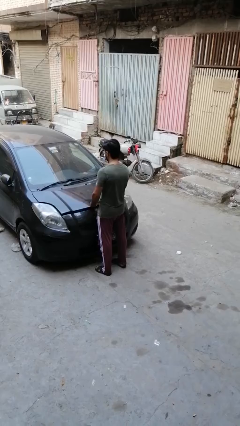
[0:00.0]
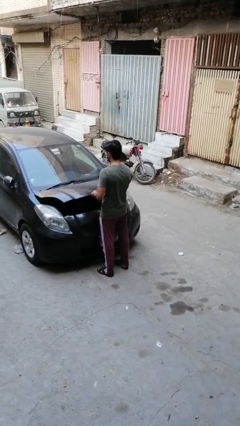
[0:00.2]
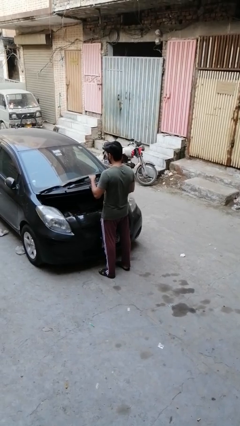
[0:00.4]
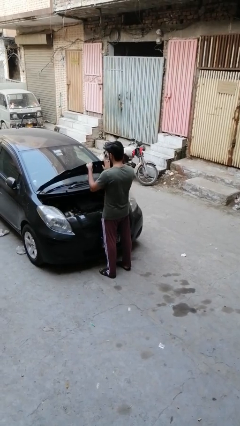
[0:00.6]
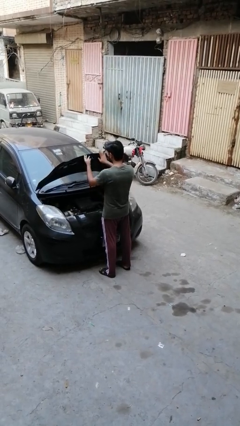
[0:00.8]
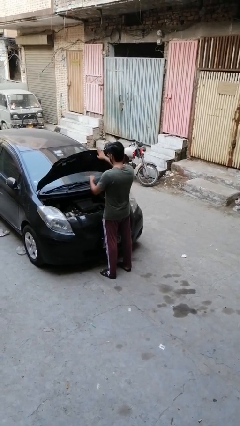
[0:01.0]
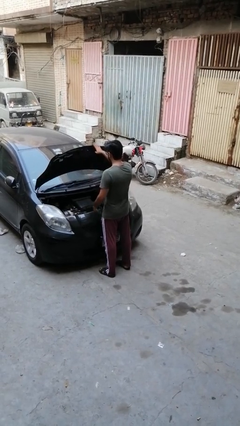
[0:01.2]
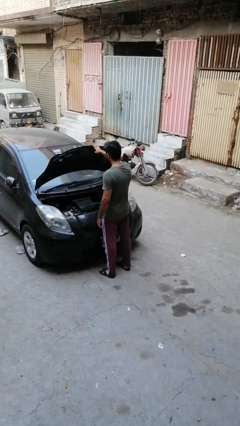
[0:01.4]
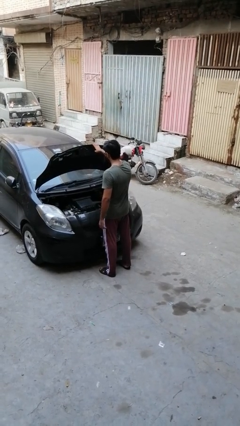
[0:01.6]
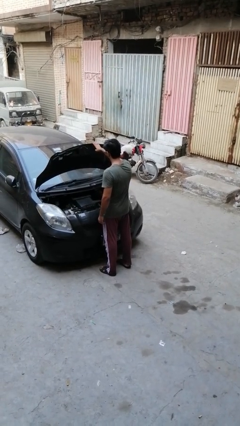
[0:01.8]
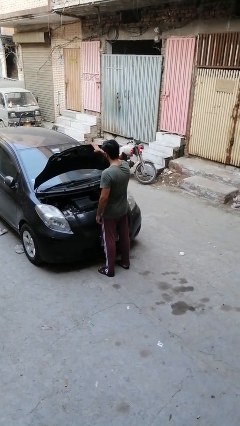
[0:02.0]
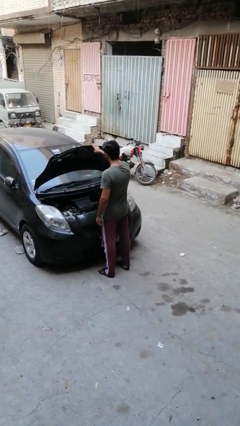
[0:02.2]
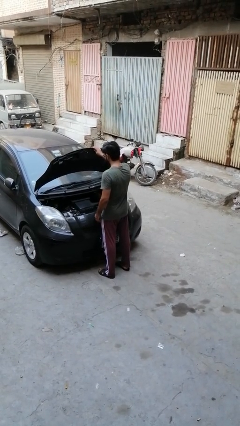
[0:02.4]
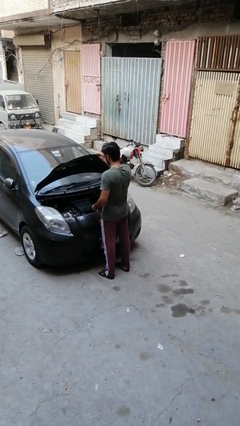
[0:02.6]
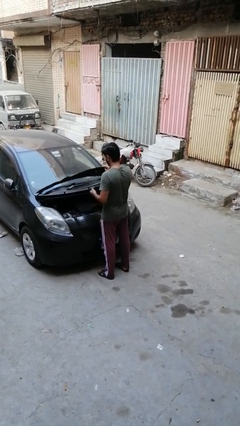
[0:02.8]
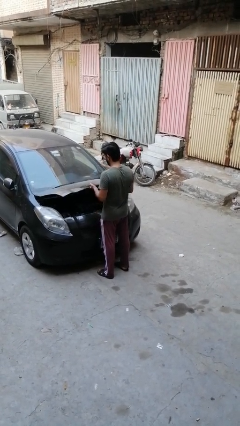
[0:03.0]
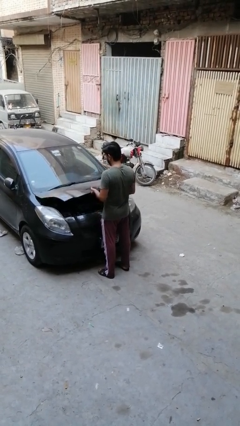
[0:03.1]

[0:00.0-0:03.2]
person opens car hood

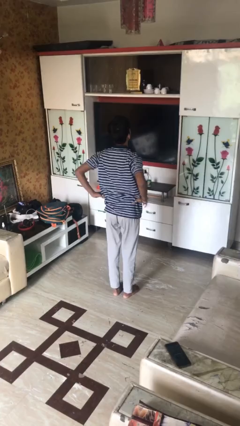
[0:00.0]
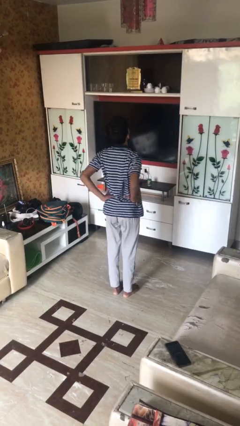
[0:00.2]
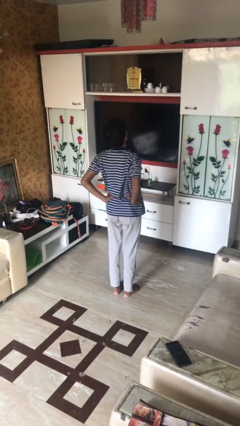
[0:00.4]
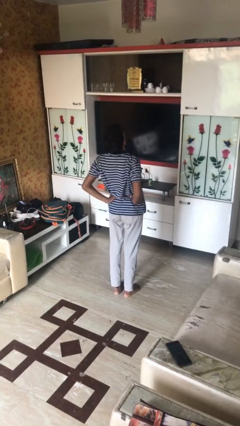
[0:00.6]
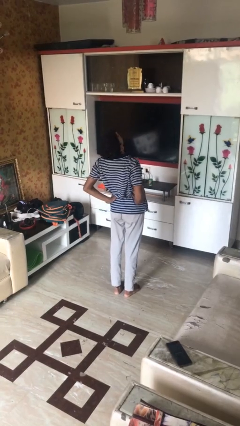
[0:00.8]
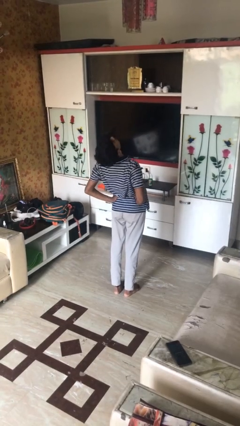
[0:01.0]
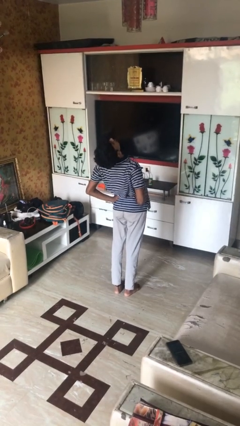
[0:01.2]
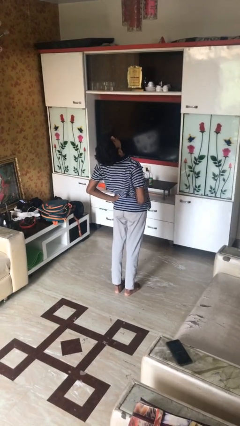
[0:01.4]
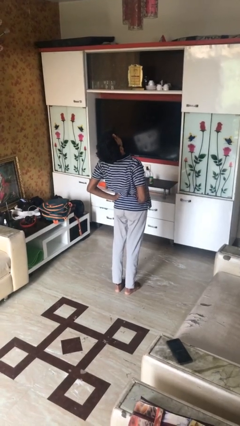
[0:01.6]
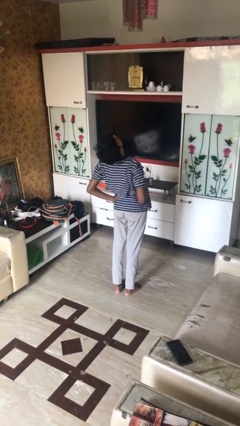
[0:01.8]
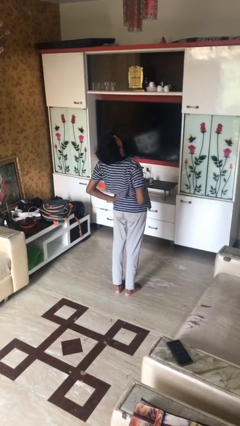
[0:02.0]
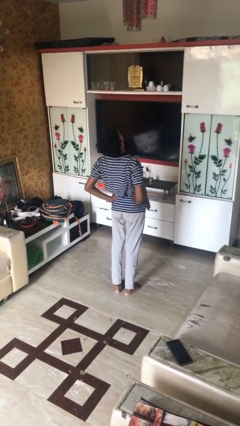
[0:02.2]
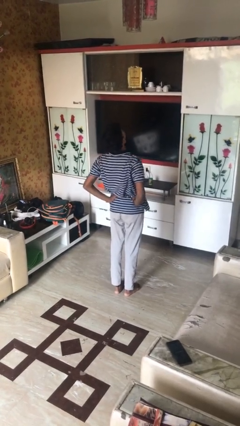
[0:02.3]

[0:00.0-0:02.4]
person stretches back

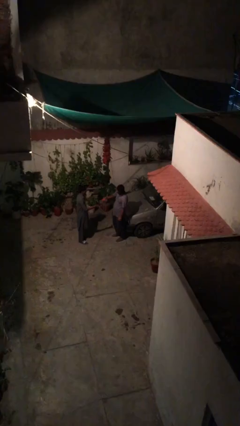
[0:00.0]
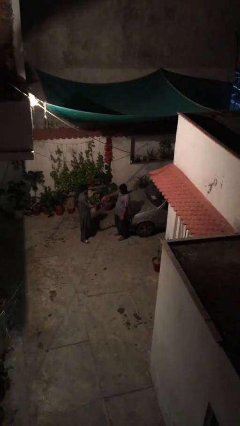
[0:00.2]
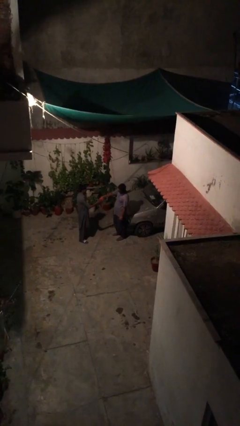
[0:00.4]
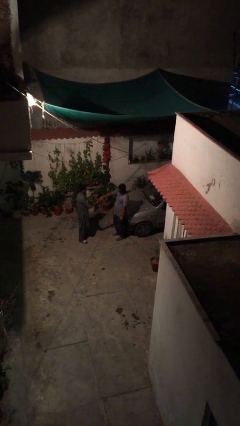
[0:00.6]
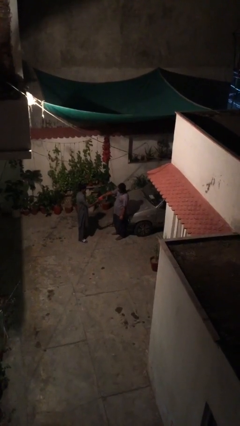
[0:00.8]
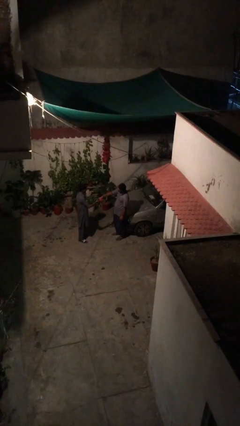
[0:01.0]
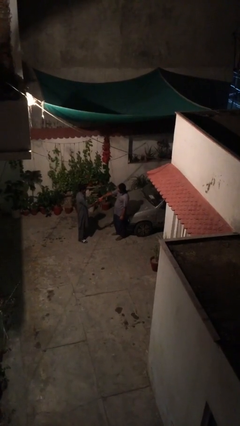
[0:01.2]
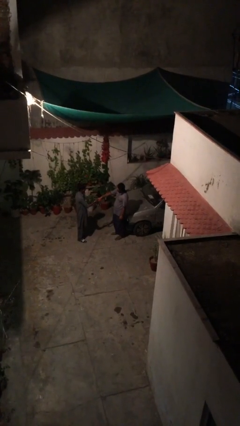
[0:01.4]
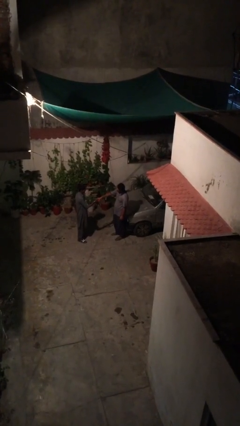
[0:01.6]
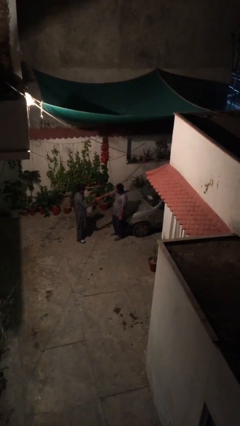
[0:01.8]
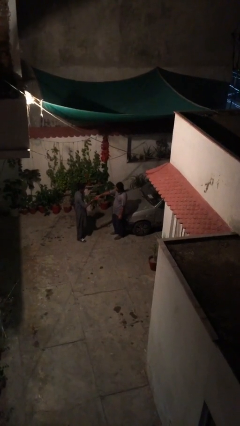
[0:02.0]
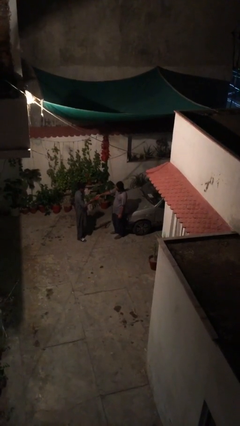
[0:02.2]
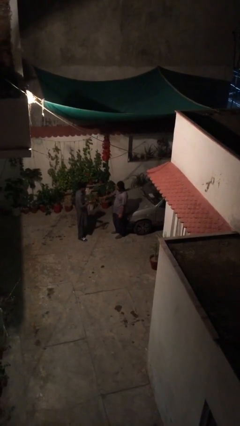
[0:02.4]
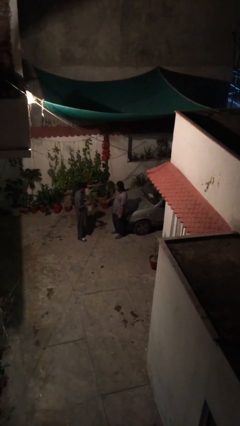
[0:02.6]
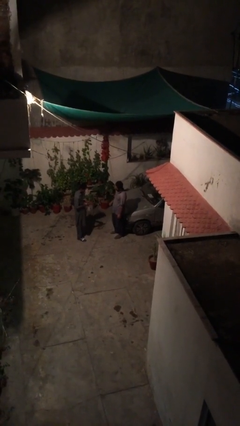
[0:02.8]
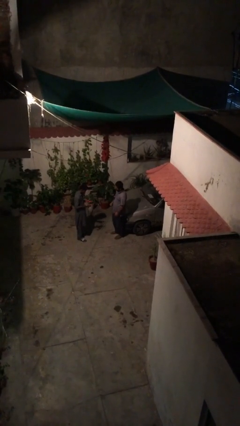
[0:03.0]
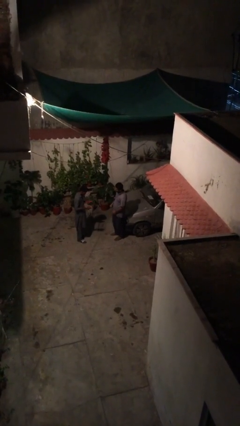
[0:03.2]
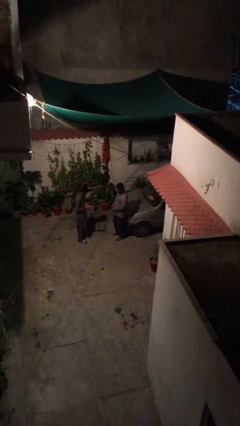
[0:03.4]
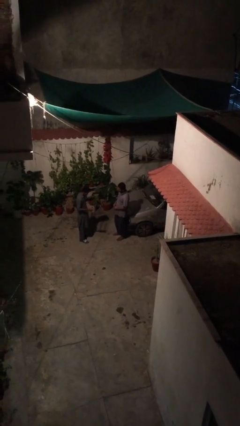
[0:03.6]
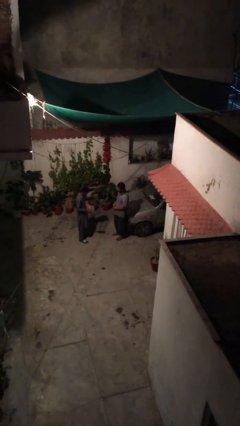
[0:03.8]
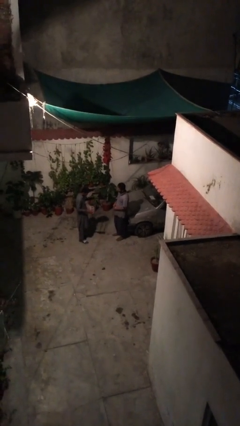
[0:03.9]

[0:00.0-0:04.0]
person transfers object to person

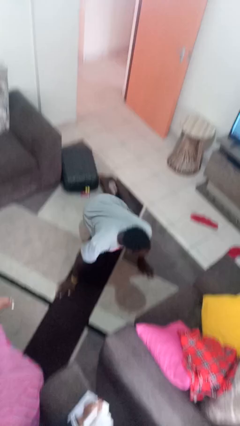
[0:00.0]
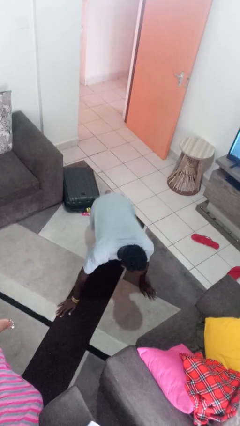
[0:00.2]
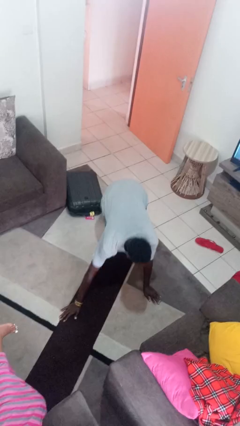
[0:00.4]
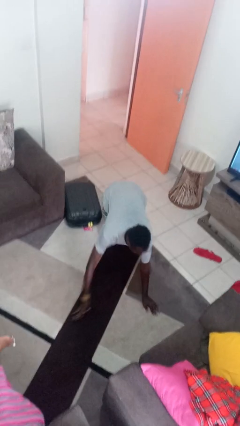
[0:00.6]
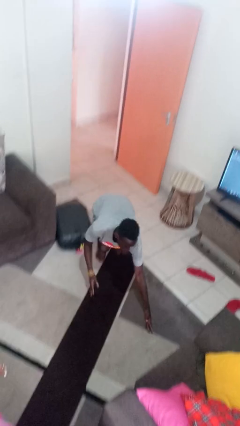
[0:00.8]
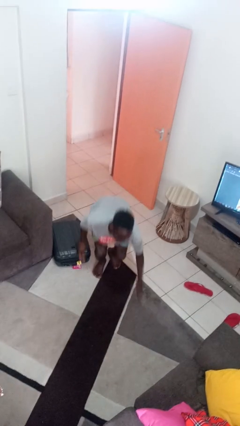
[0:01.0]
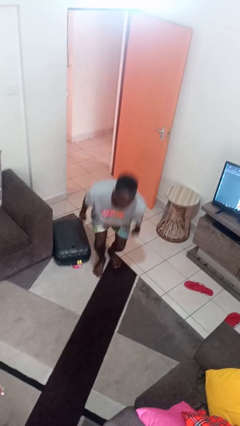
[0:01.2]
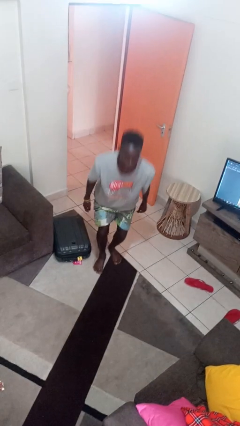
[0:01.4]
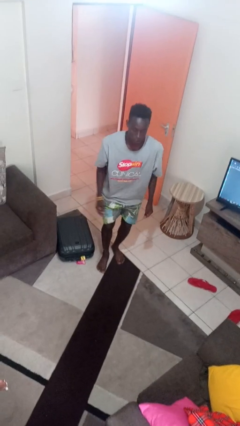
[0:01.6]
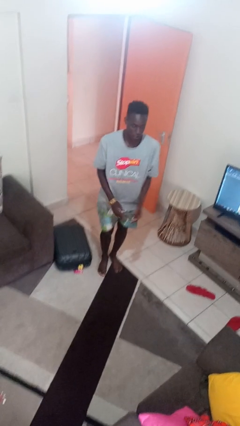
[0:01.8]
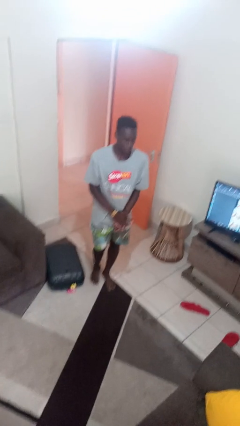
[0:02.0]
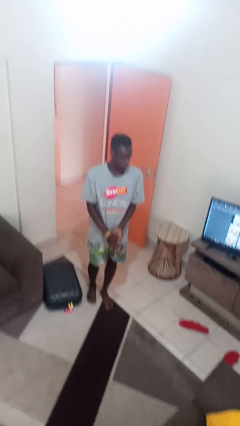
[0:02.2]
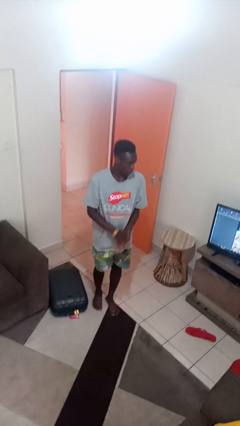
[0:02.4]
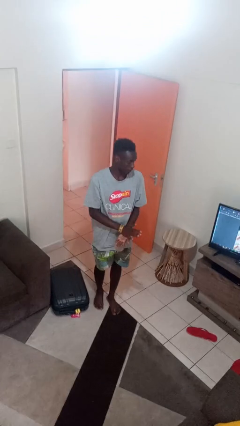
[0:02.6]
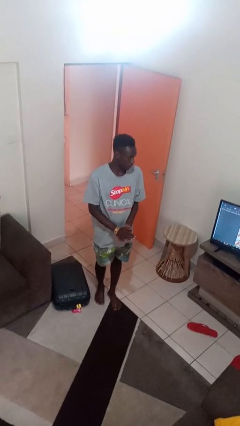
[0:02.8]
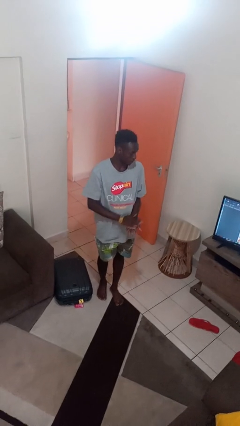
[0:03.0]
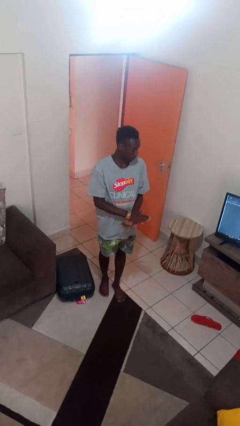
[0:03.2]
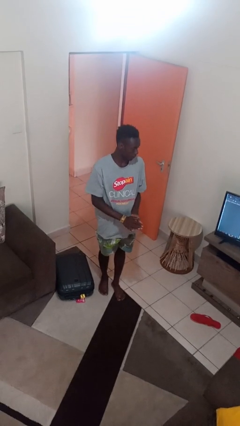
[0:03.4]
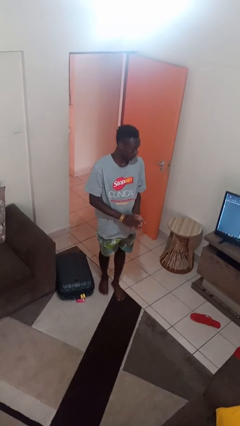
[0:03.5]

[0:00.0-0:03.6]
person stands up from floor

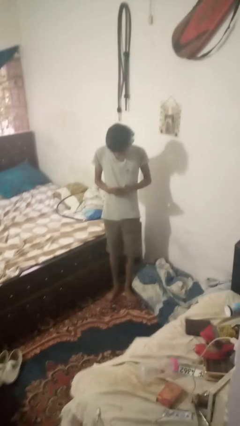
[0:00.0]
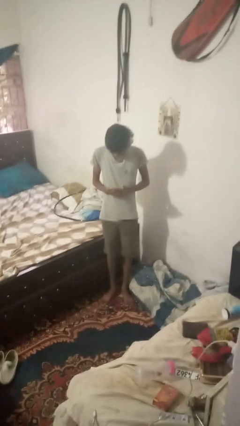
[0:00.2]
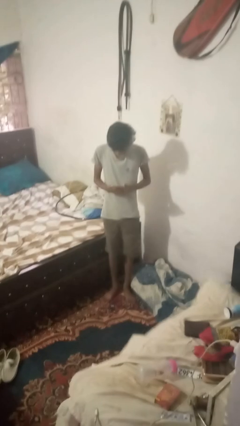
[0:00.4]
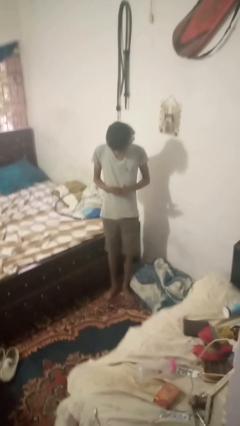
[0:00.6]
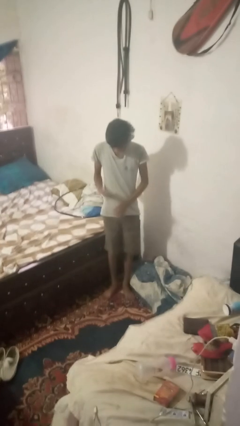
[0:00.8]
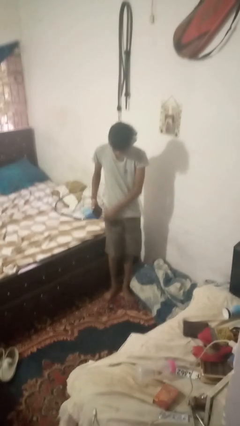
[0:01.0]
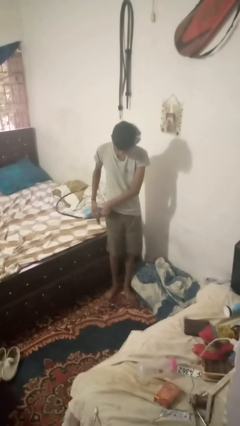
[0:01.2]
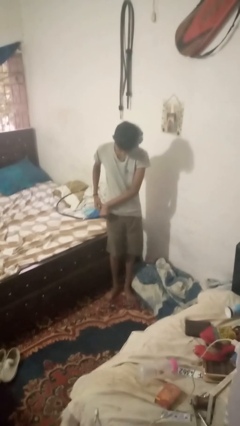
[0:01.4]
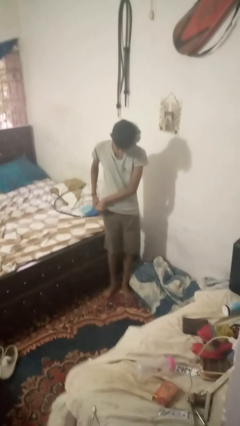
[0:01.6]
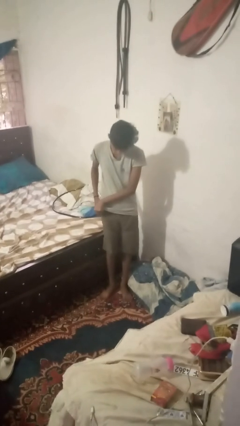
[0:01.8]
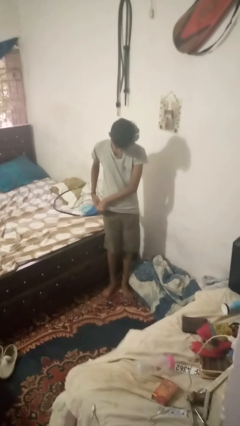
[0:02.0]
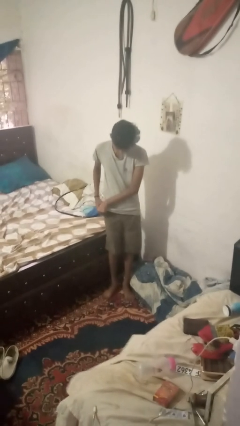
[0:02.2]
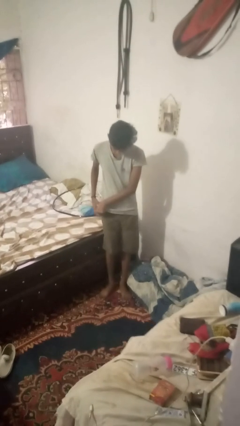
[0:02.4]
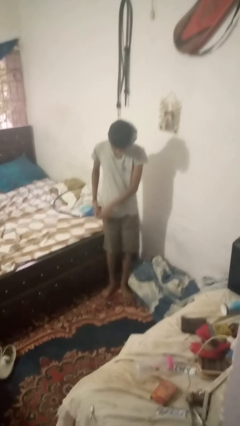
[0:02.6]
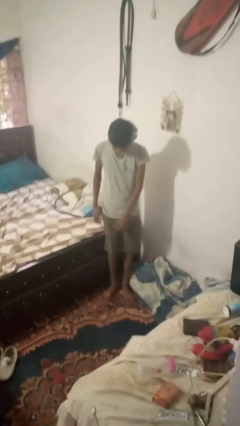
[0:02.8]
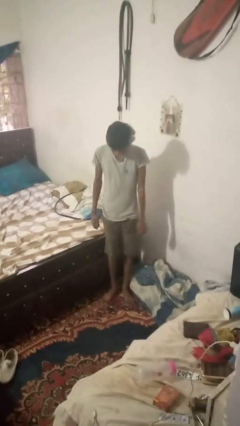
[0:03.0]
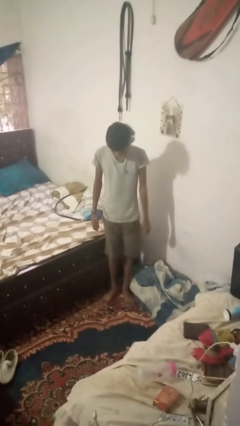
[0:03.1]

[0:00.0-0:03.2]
person puts phone into pocket

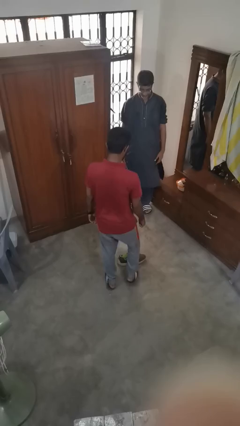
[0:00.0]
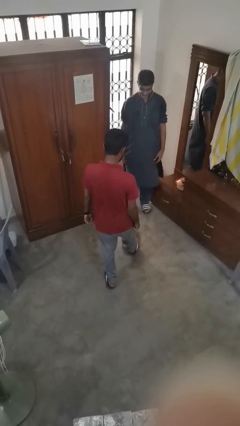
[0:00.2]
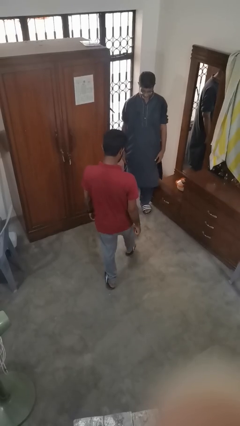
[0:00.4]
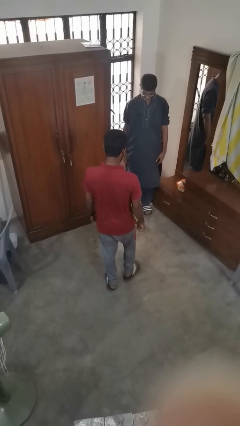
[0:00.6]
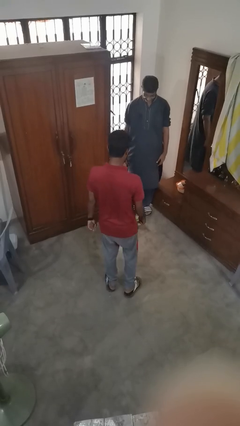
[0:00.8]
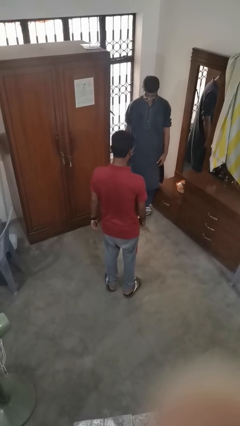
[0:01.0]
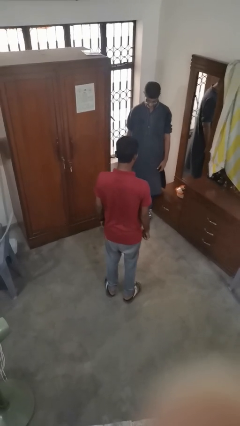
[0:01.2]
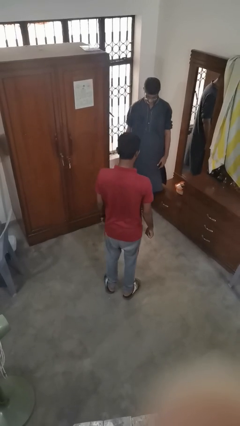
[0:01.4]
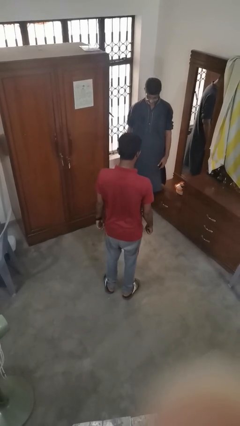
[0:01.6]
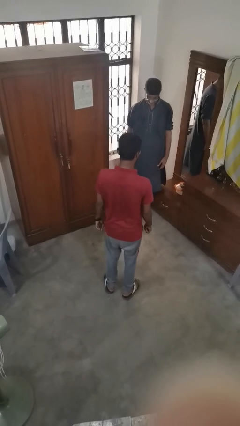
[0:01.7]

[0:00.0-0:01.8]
person kicks object to person
